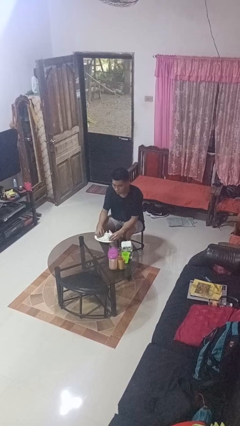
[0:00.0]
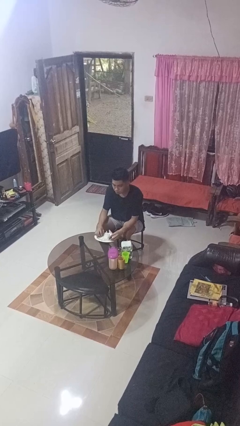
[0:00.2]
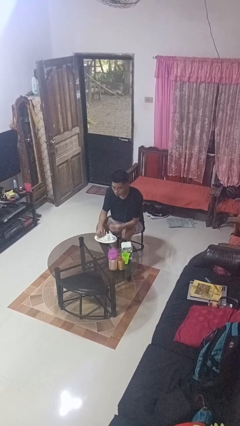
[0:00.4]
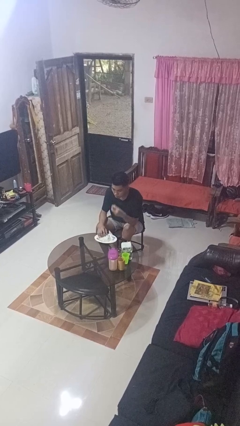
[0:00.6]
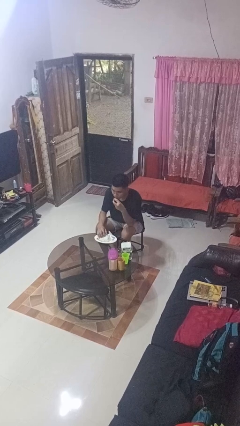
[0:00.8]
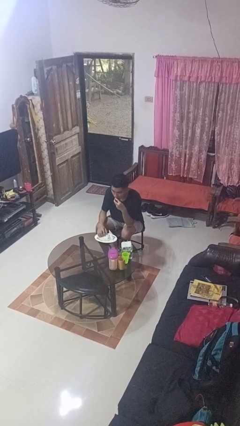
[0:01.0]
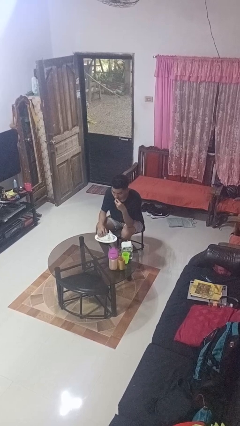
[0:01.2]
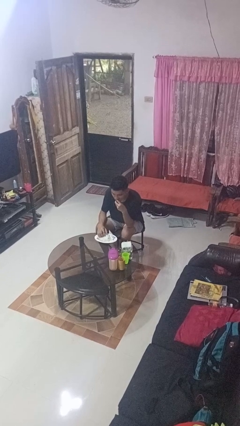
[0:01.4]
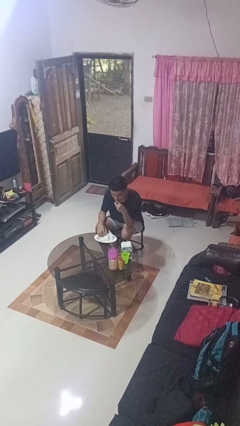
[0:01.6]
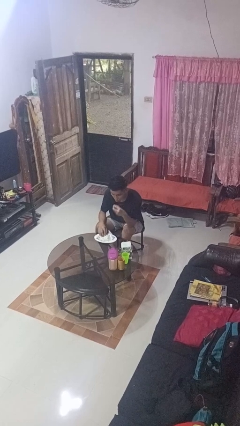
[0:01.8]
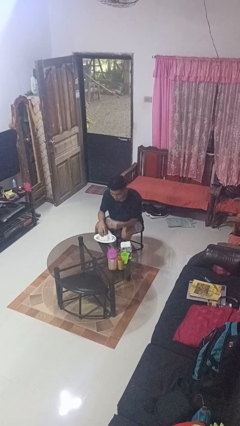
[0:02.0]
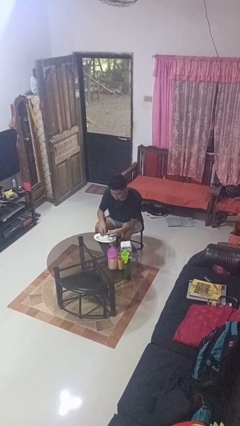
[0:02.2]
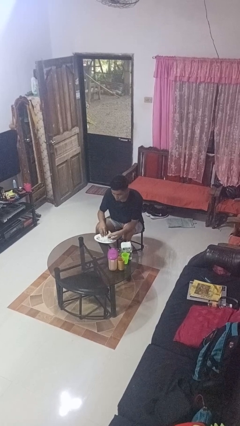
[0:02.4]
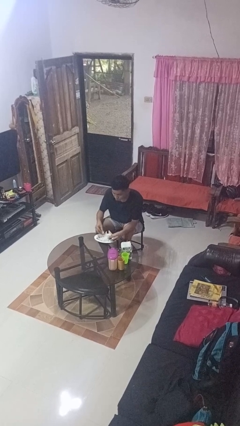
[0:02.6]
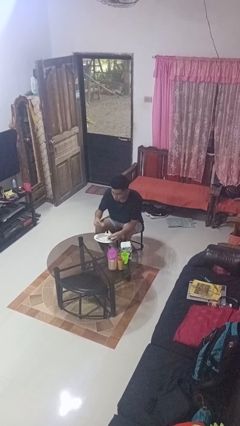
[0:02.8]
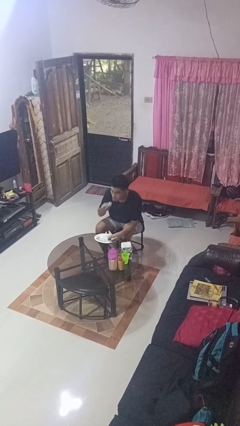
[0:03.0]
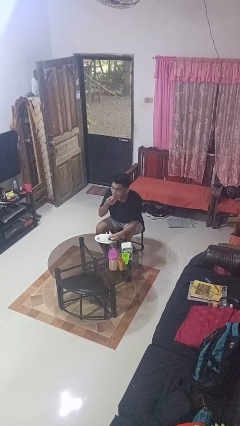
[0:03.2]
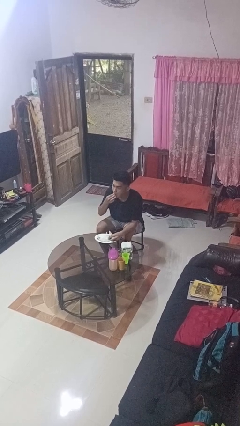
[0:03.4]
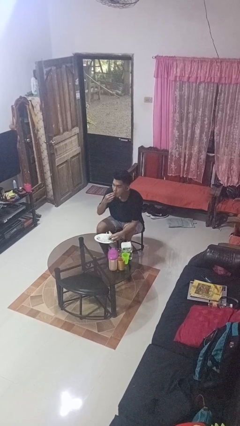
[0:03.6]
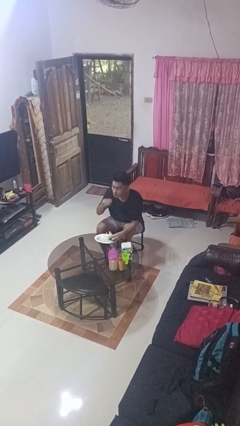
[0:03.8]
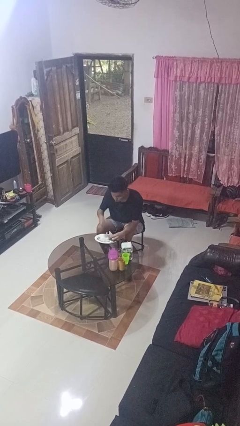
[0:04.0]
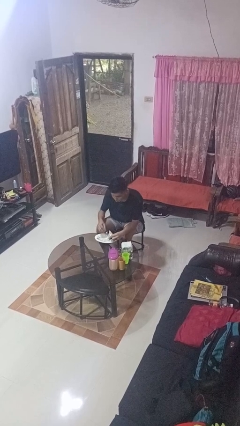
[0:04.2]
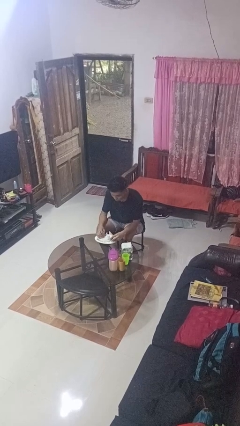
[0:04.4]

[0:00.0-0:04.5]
person eats with hands

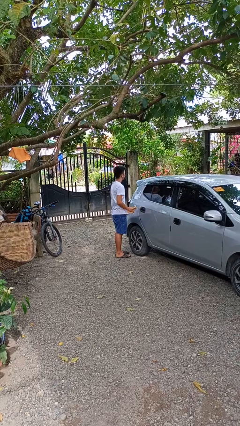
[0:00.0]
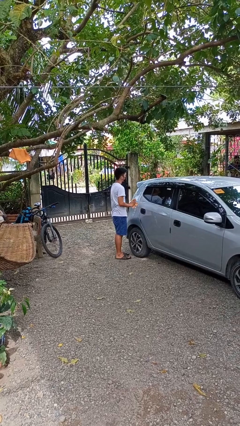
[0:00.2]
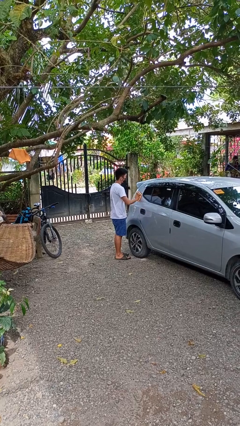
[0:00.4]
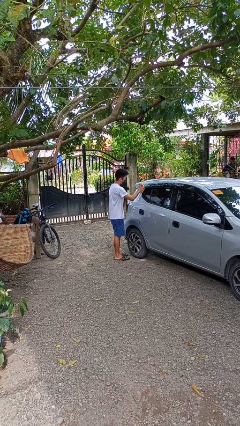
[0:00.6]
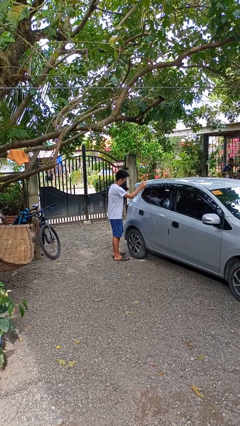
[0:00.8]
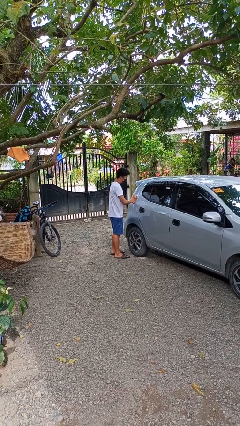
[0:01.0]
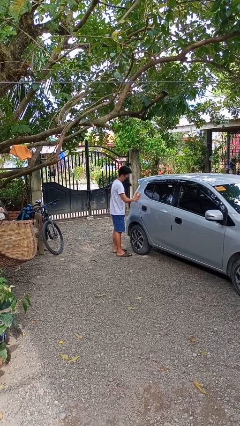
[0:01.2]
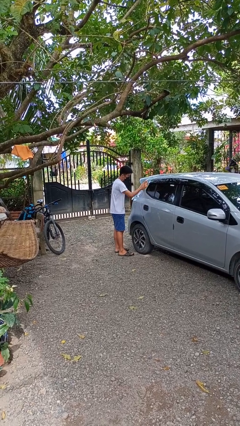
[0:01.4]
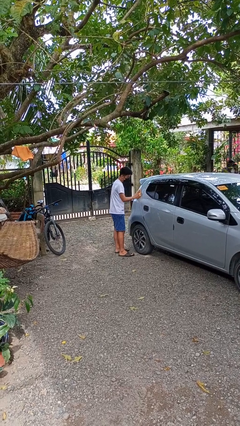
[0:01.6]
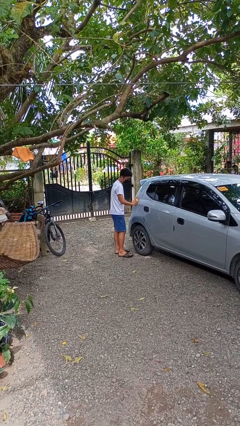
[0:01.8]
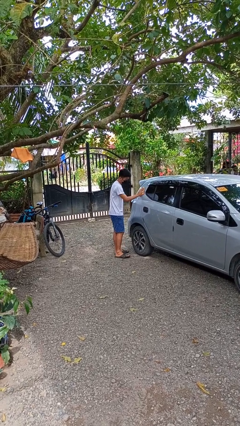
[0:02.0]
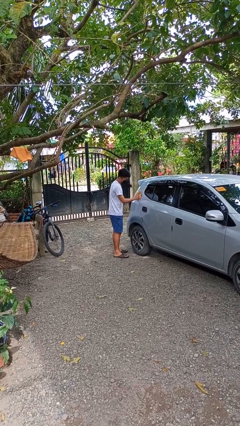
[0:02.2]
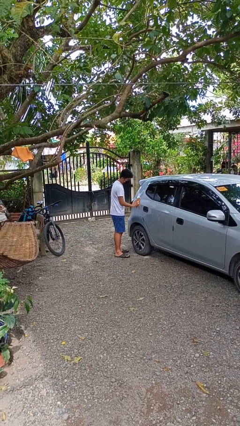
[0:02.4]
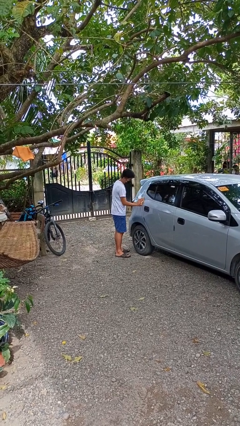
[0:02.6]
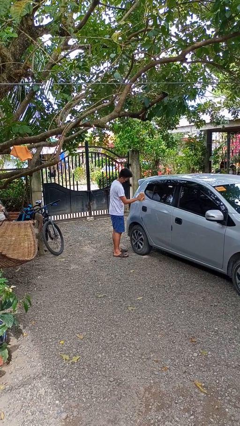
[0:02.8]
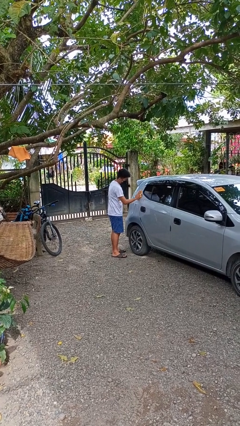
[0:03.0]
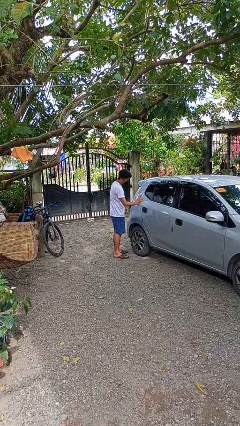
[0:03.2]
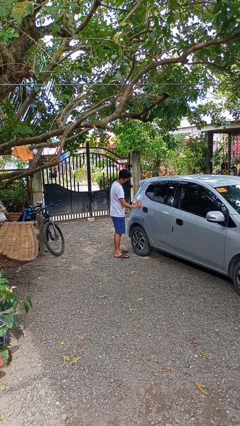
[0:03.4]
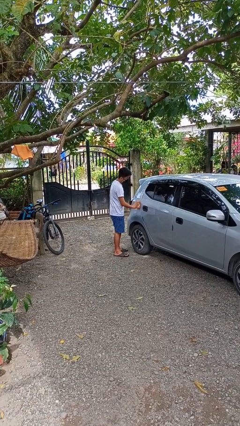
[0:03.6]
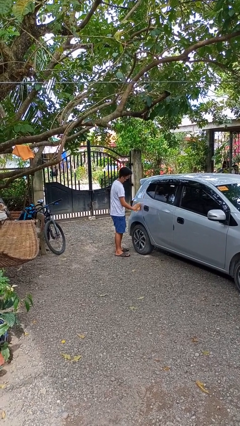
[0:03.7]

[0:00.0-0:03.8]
person polishes car with rag

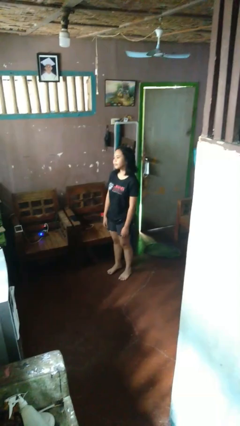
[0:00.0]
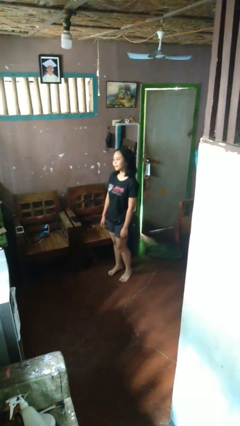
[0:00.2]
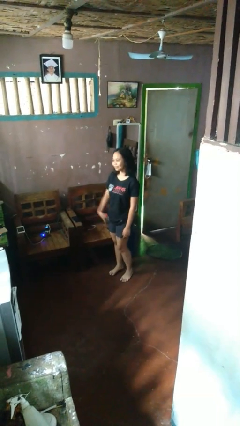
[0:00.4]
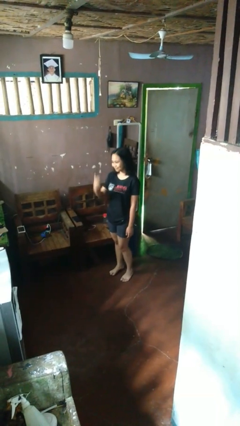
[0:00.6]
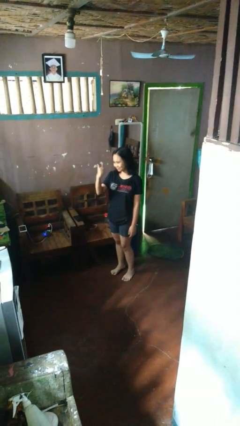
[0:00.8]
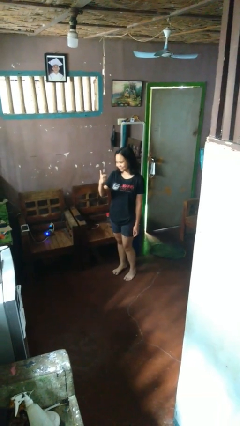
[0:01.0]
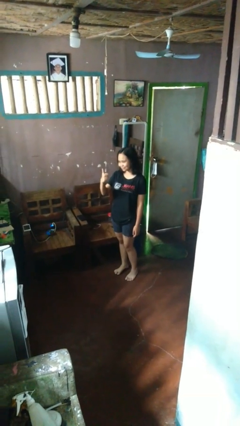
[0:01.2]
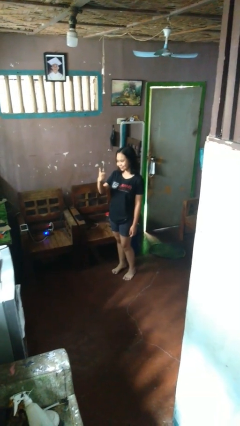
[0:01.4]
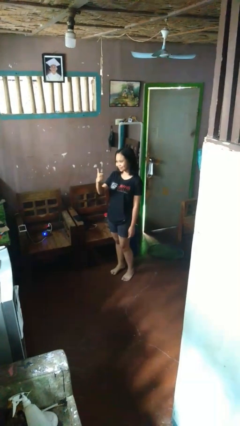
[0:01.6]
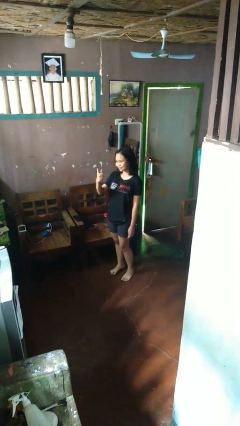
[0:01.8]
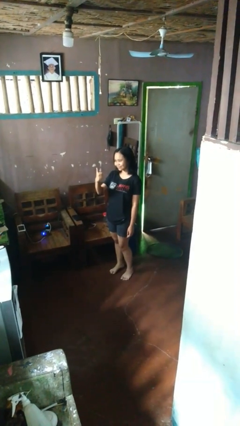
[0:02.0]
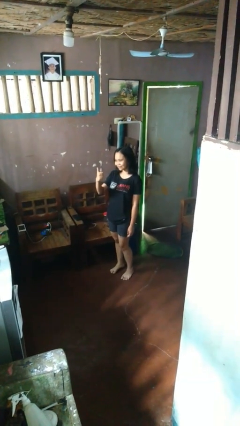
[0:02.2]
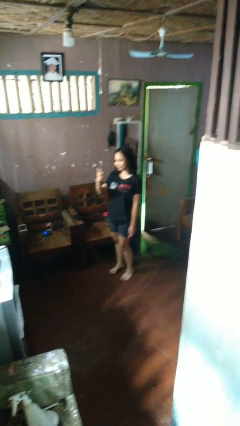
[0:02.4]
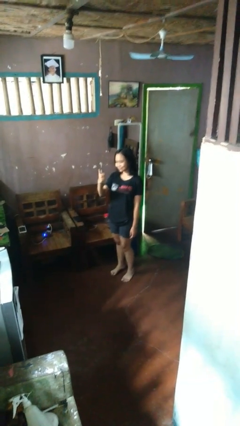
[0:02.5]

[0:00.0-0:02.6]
person gestures thumbs up

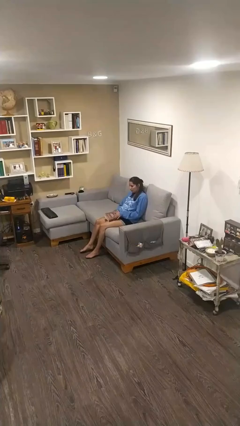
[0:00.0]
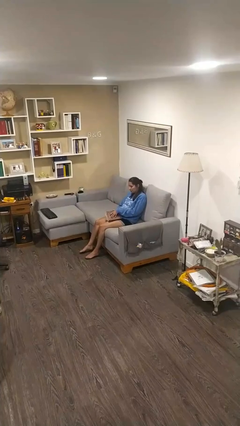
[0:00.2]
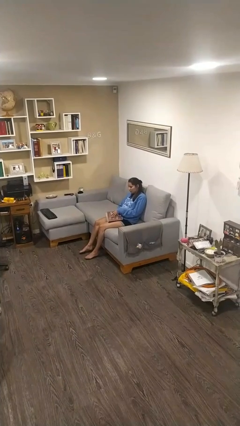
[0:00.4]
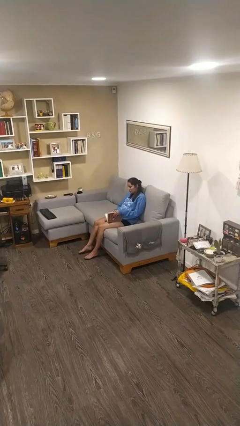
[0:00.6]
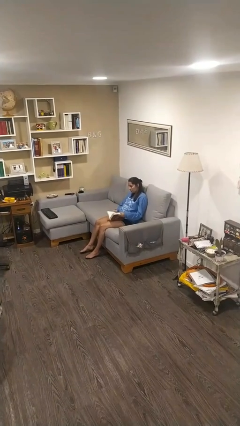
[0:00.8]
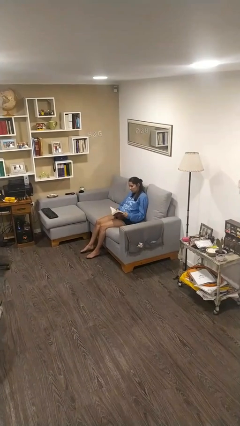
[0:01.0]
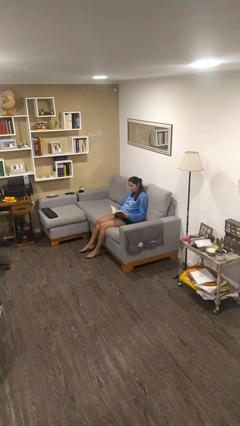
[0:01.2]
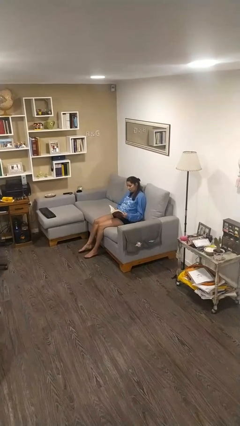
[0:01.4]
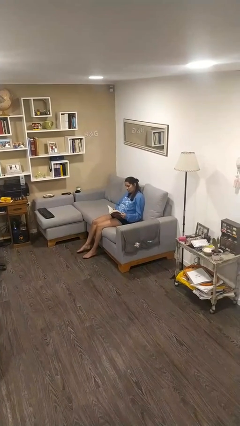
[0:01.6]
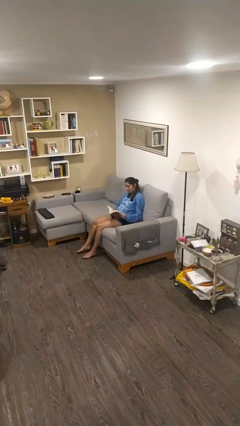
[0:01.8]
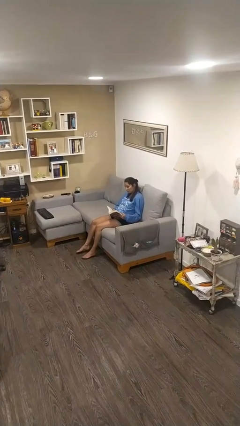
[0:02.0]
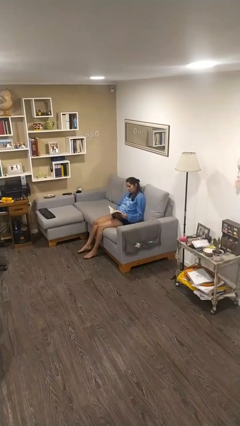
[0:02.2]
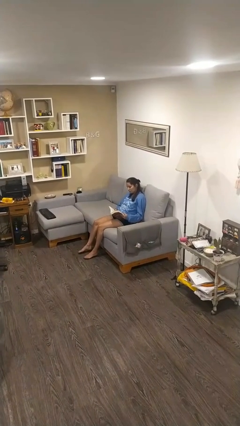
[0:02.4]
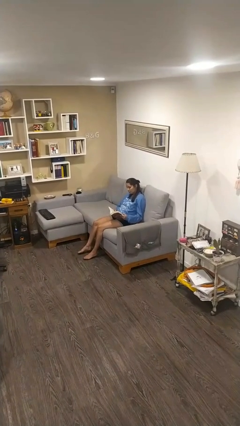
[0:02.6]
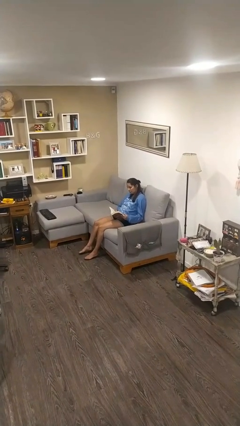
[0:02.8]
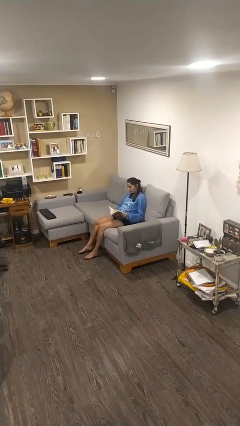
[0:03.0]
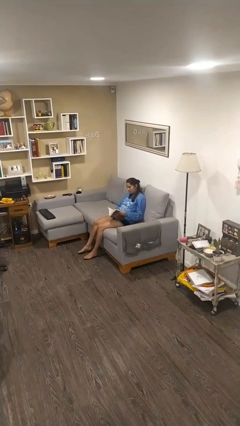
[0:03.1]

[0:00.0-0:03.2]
person reads document

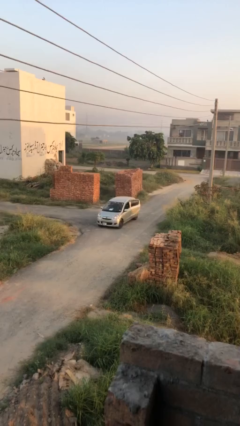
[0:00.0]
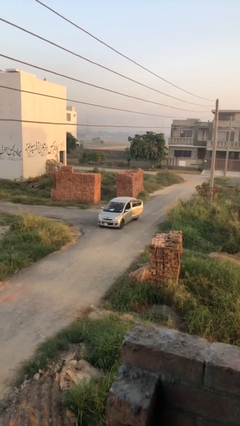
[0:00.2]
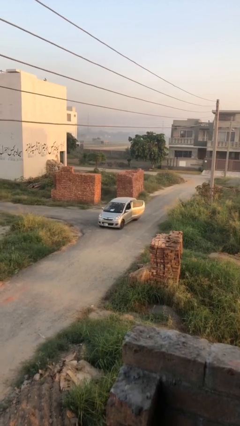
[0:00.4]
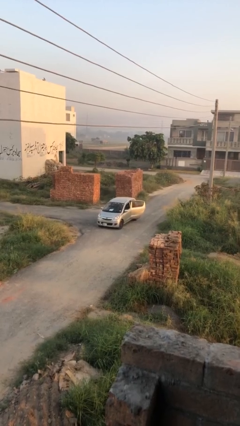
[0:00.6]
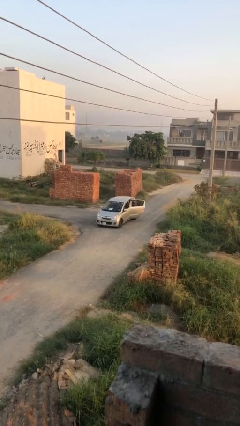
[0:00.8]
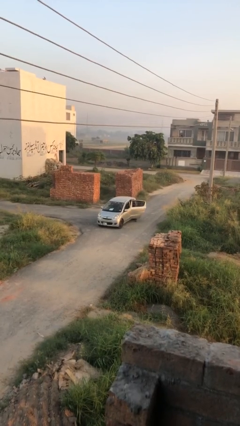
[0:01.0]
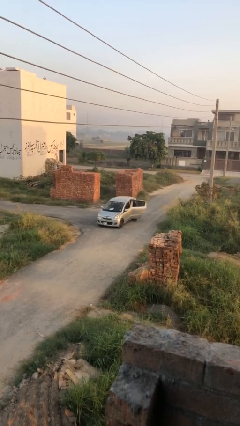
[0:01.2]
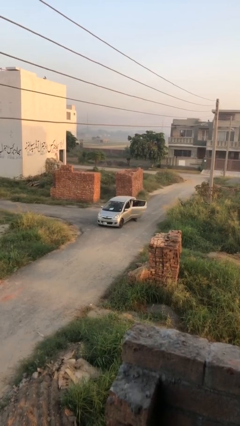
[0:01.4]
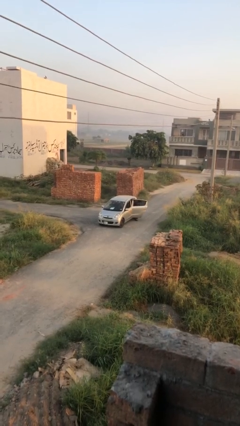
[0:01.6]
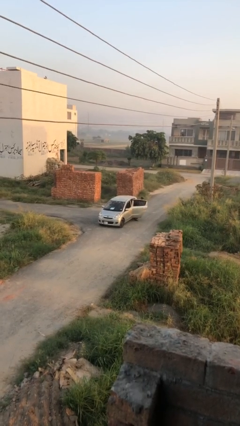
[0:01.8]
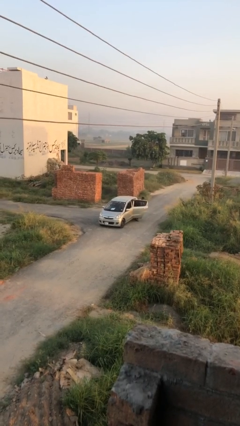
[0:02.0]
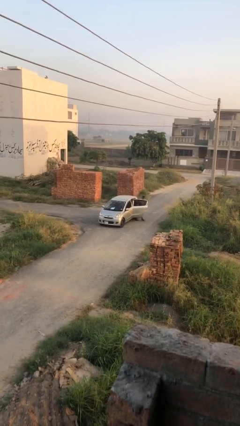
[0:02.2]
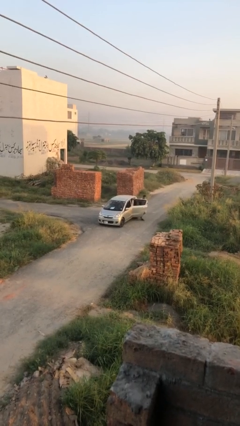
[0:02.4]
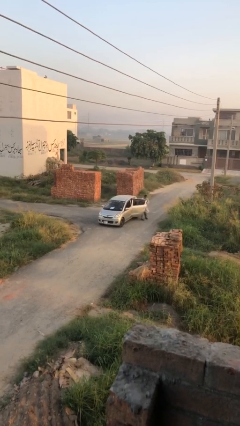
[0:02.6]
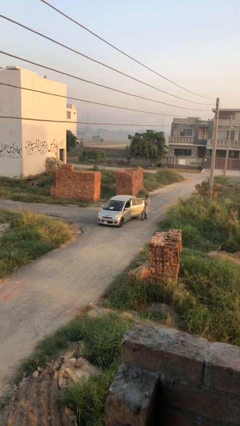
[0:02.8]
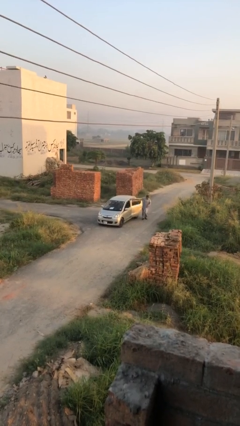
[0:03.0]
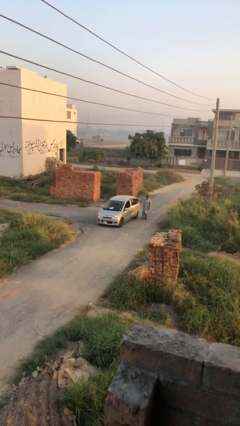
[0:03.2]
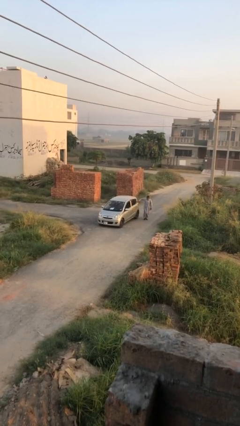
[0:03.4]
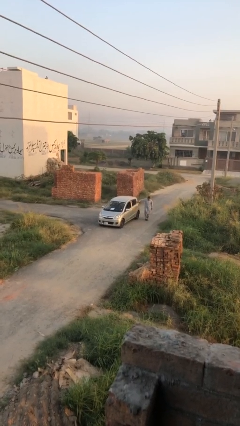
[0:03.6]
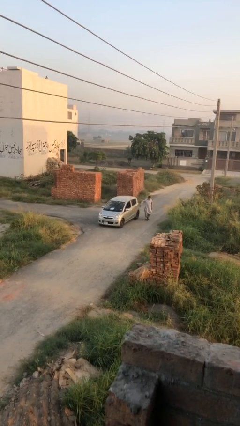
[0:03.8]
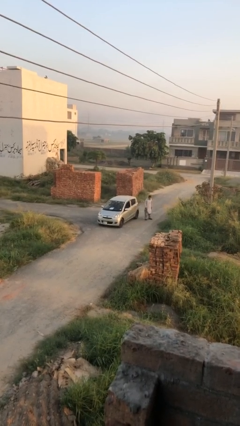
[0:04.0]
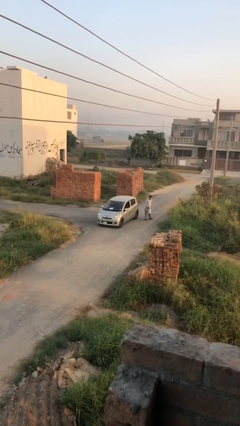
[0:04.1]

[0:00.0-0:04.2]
car drops off person
